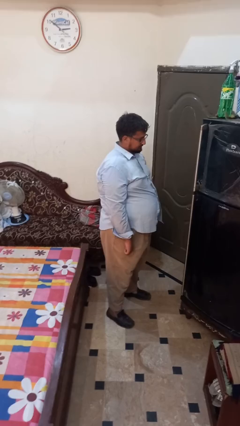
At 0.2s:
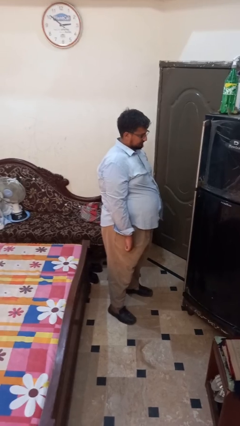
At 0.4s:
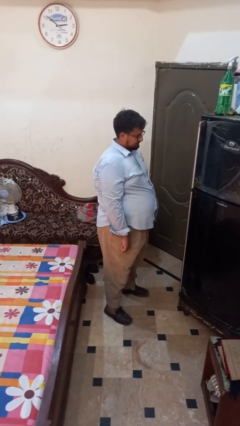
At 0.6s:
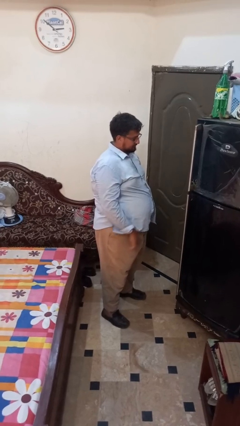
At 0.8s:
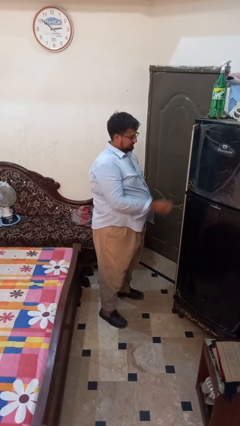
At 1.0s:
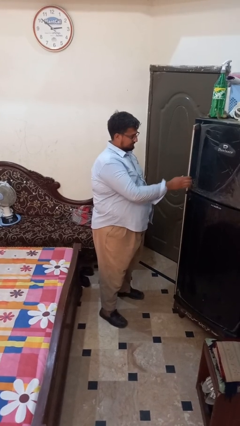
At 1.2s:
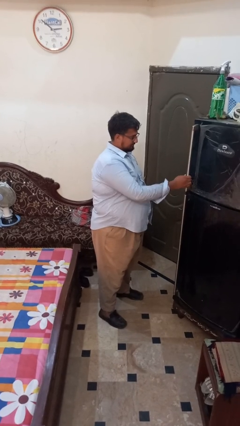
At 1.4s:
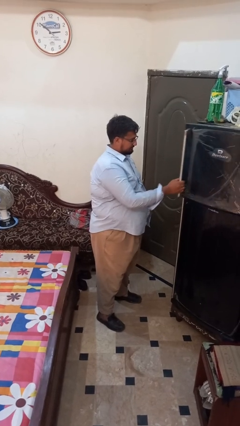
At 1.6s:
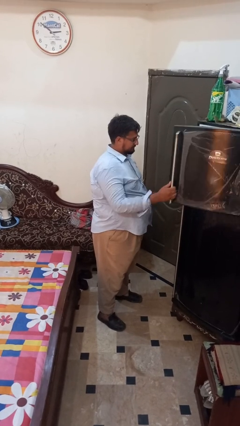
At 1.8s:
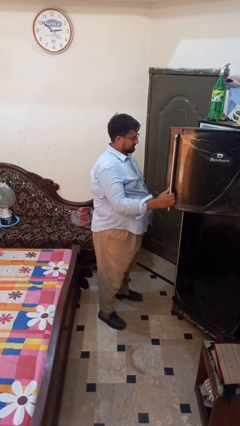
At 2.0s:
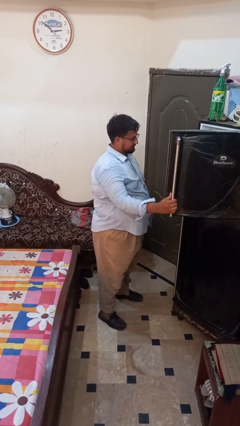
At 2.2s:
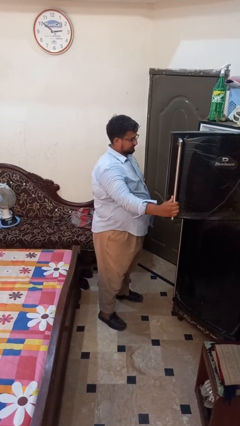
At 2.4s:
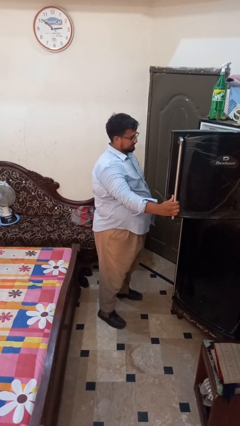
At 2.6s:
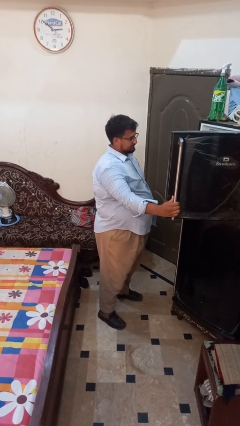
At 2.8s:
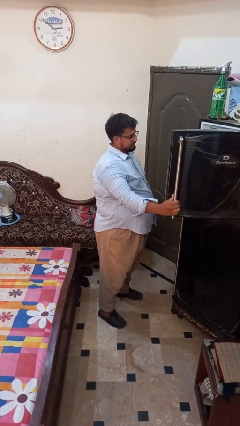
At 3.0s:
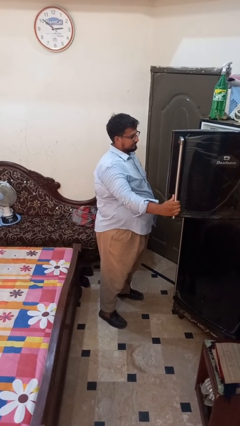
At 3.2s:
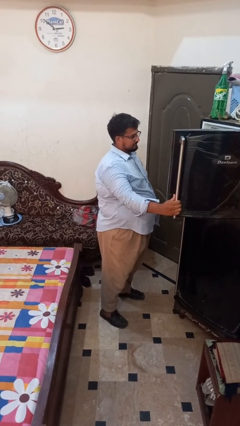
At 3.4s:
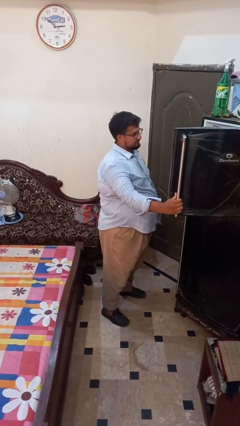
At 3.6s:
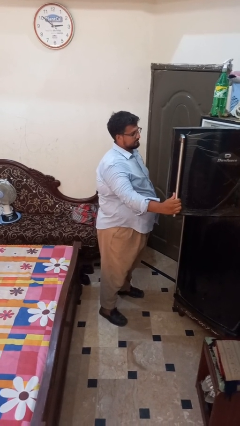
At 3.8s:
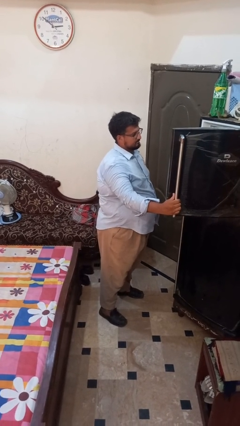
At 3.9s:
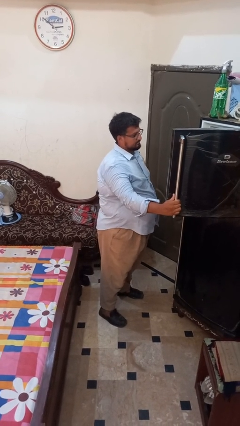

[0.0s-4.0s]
person opens refrigerator

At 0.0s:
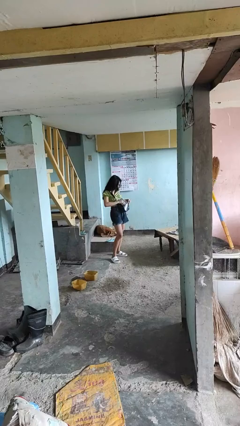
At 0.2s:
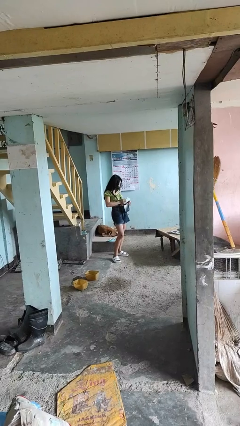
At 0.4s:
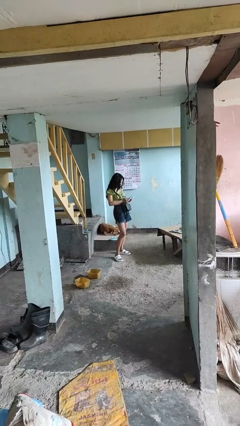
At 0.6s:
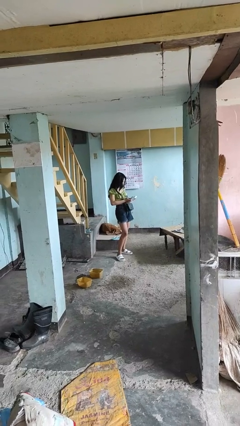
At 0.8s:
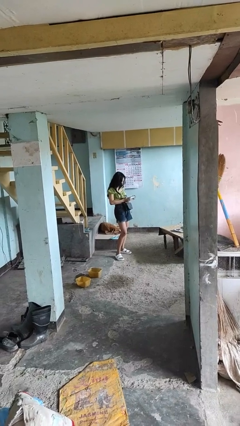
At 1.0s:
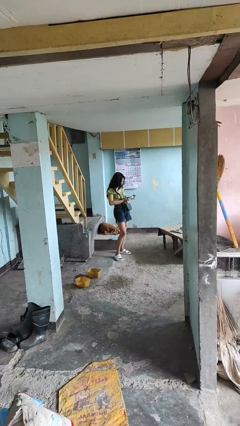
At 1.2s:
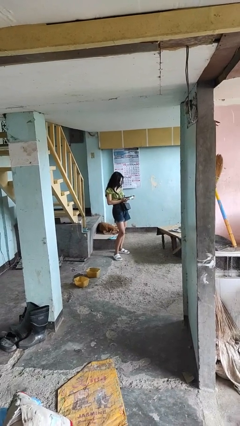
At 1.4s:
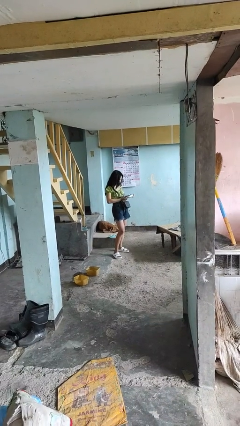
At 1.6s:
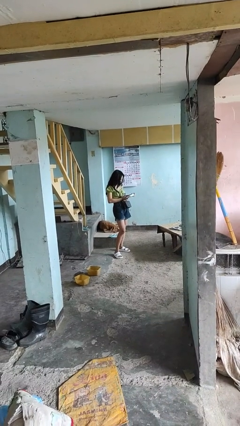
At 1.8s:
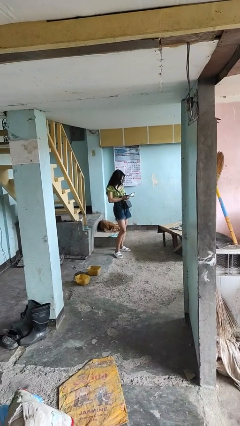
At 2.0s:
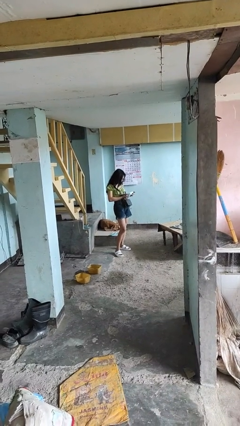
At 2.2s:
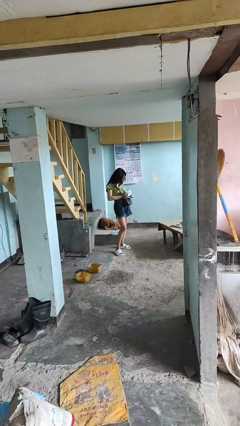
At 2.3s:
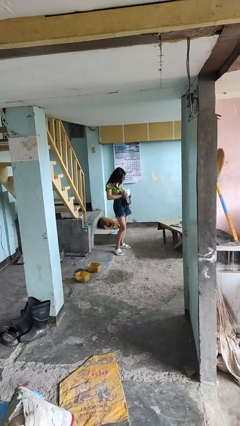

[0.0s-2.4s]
person takes object from purse

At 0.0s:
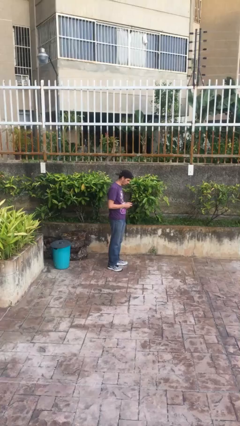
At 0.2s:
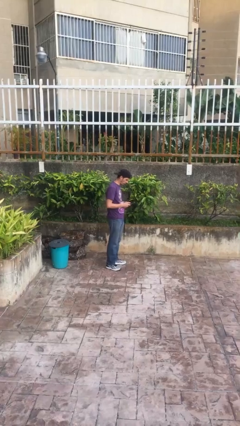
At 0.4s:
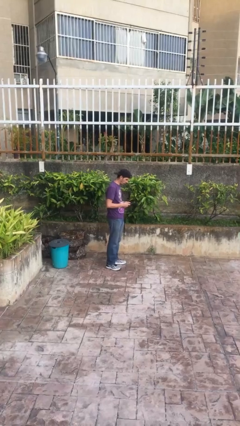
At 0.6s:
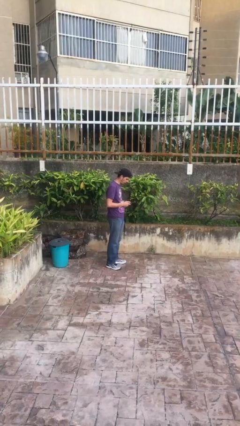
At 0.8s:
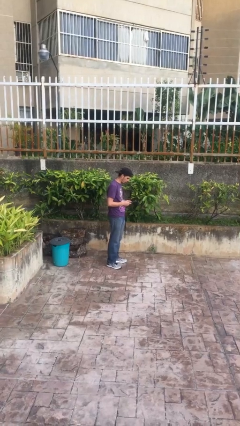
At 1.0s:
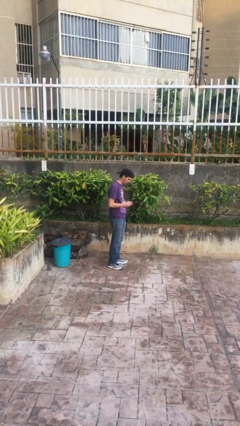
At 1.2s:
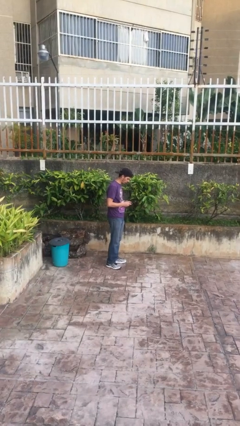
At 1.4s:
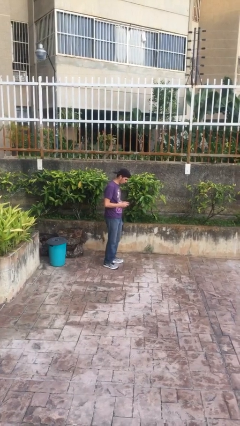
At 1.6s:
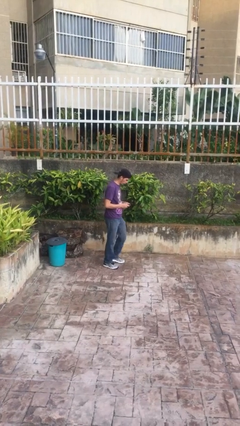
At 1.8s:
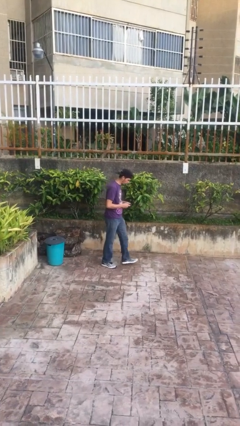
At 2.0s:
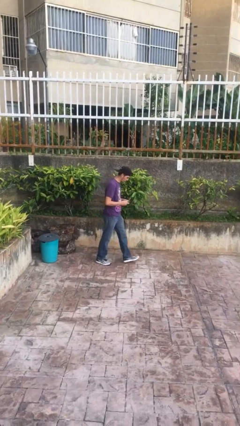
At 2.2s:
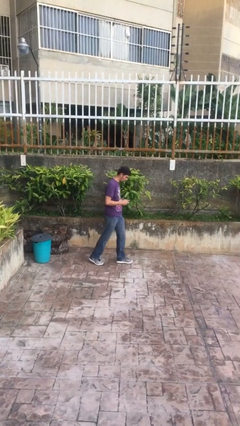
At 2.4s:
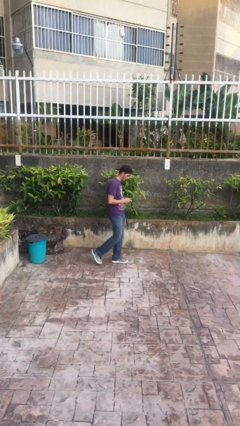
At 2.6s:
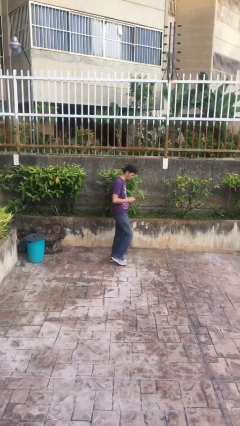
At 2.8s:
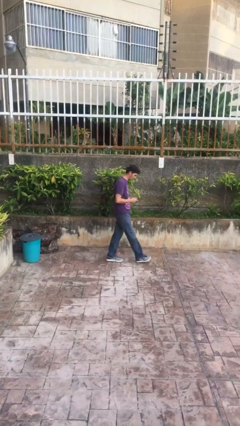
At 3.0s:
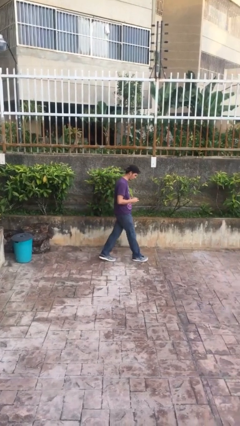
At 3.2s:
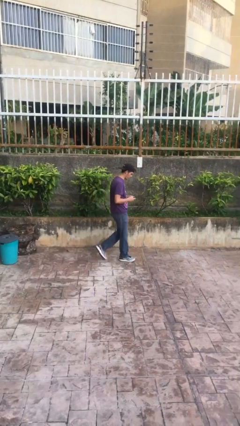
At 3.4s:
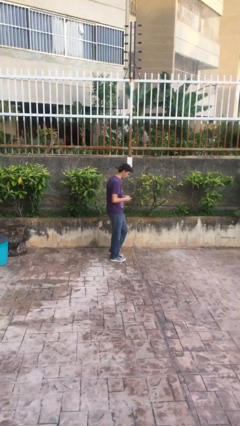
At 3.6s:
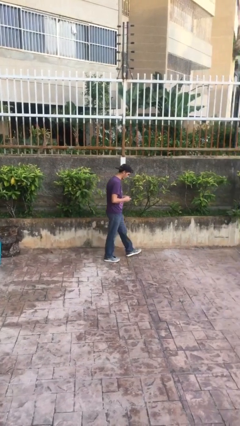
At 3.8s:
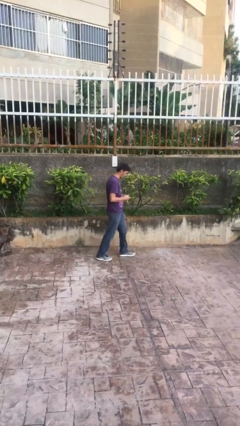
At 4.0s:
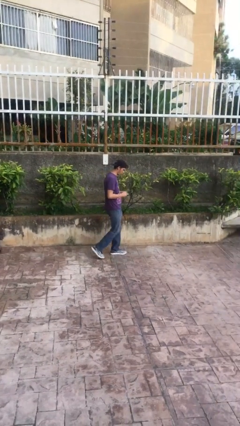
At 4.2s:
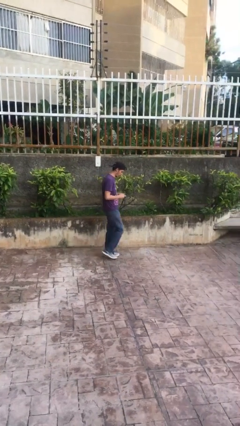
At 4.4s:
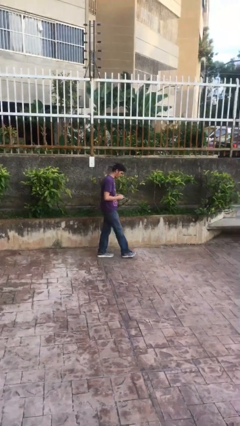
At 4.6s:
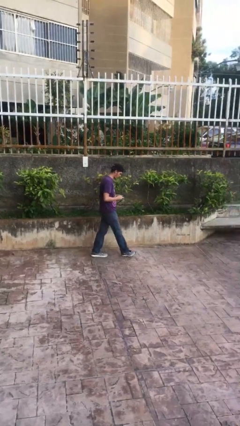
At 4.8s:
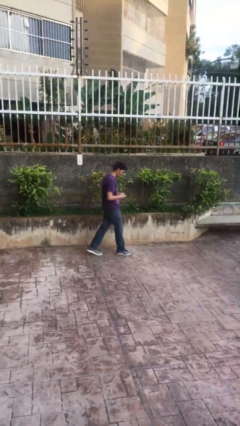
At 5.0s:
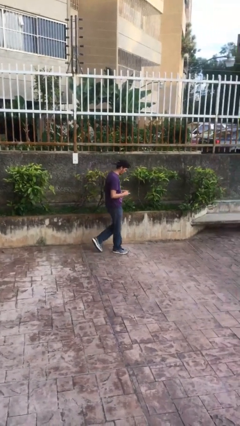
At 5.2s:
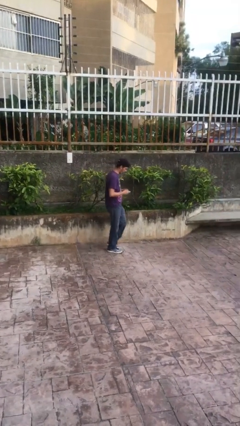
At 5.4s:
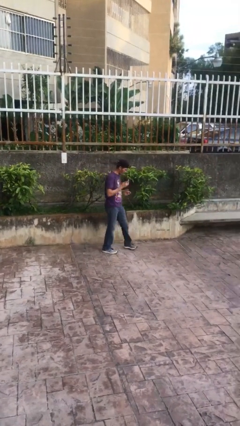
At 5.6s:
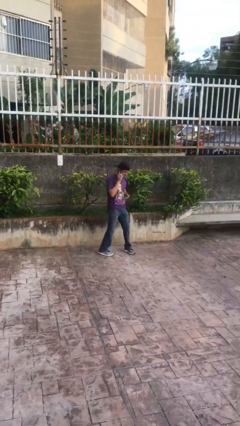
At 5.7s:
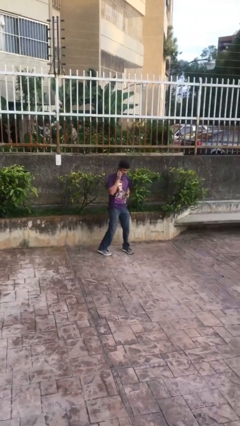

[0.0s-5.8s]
person texts on phone

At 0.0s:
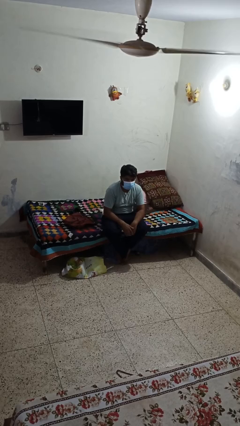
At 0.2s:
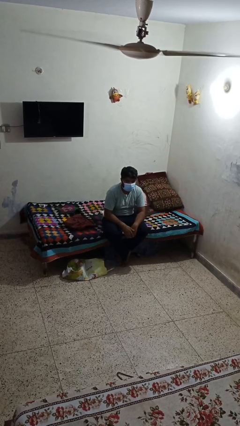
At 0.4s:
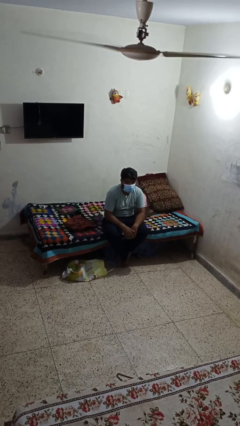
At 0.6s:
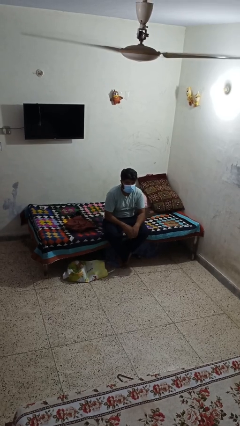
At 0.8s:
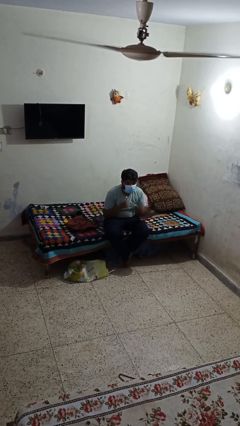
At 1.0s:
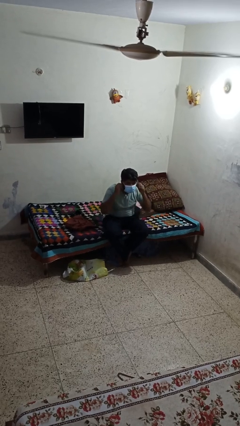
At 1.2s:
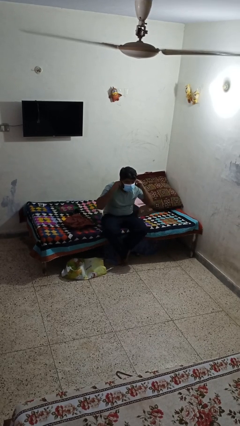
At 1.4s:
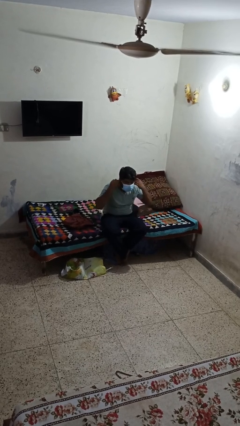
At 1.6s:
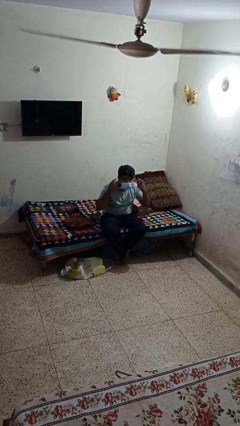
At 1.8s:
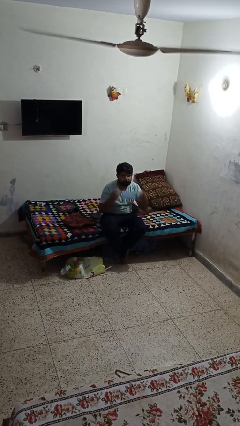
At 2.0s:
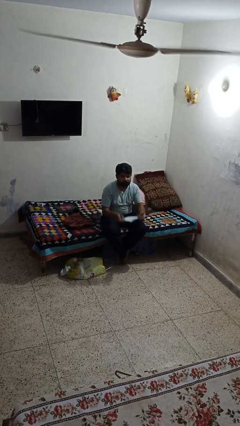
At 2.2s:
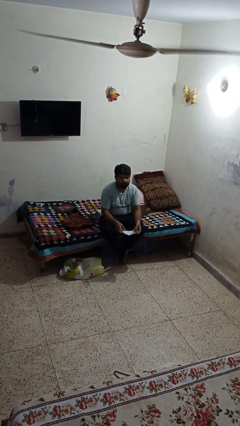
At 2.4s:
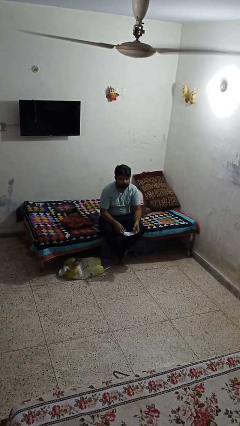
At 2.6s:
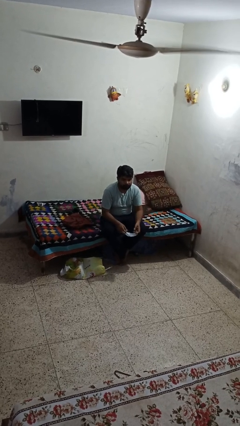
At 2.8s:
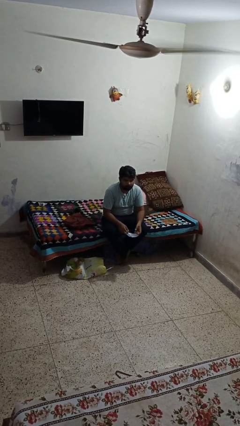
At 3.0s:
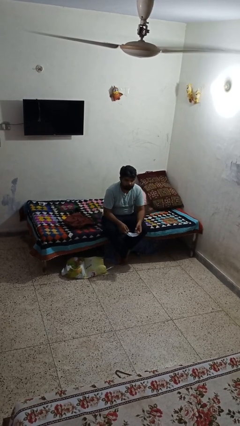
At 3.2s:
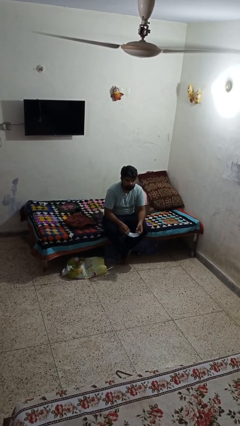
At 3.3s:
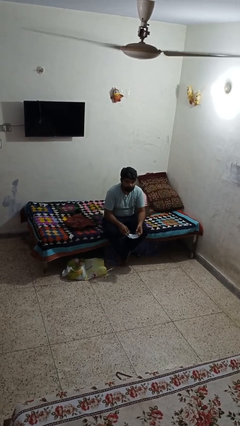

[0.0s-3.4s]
person takes off facemask

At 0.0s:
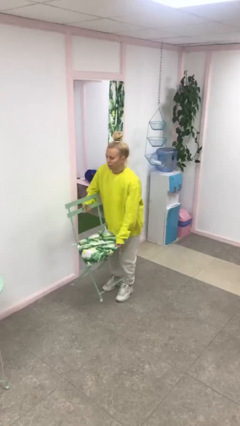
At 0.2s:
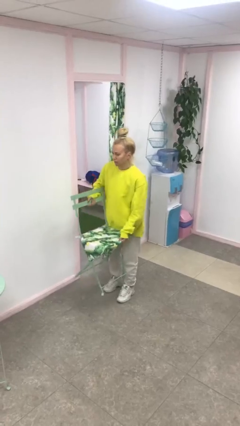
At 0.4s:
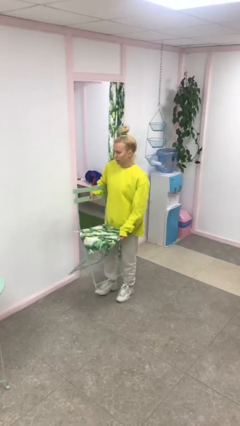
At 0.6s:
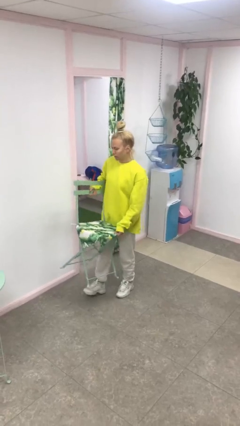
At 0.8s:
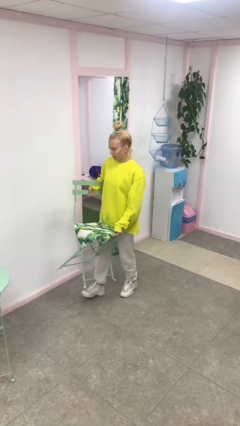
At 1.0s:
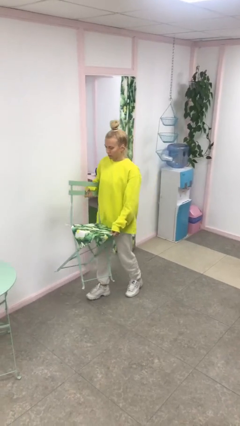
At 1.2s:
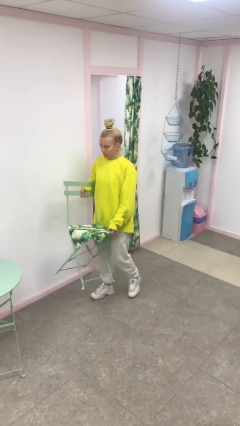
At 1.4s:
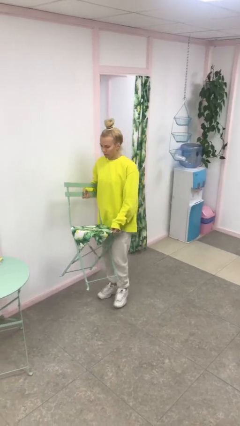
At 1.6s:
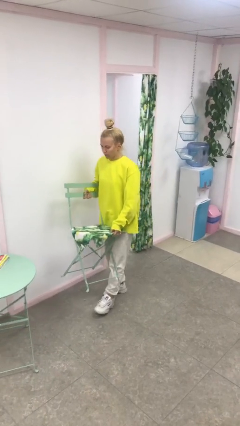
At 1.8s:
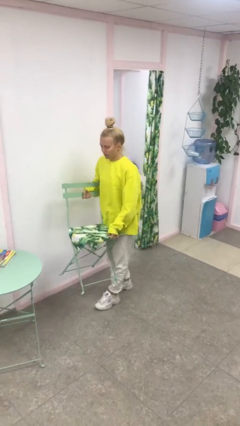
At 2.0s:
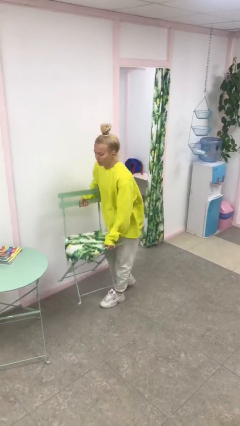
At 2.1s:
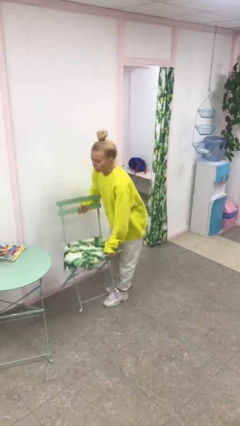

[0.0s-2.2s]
person carries heavy object
